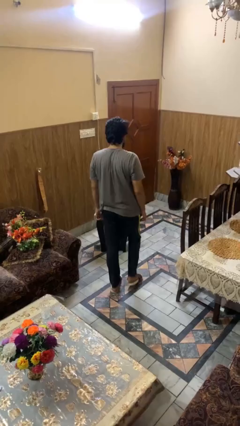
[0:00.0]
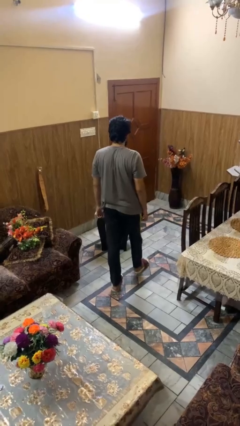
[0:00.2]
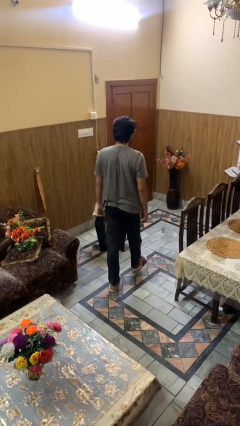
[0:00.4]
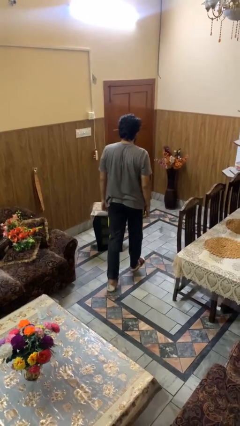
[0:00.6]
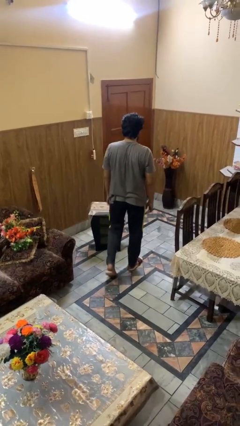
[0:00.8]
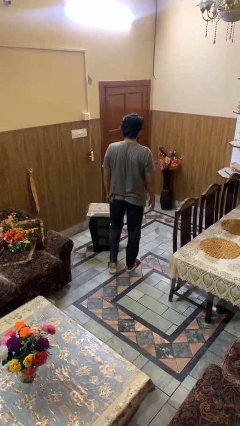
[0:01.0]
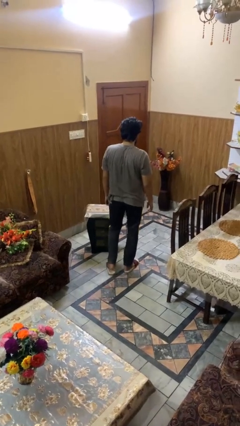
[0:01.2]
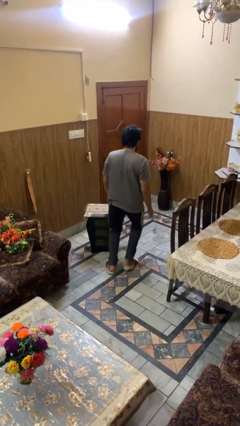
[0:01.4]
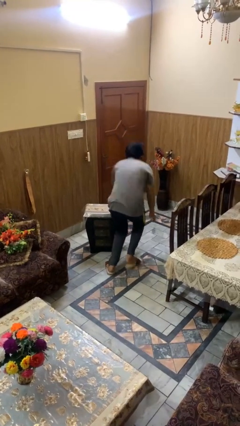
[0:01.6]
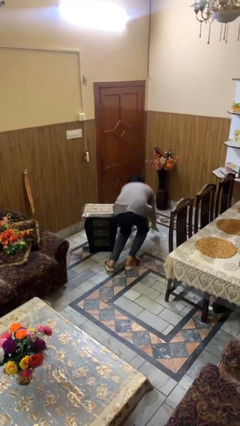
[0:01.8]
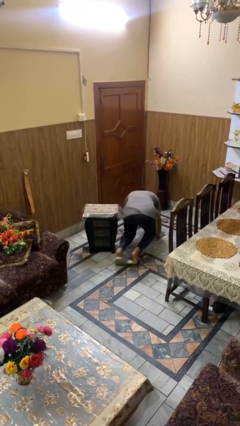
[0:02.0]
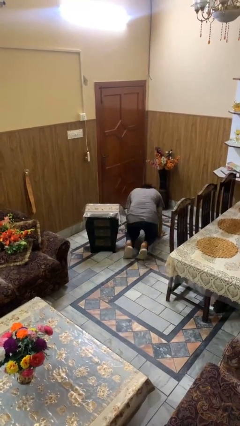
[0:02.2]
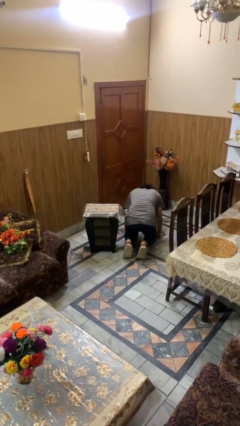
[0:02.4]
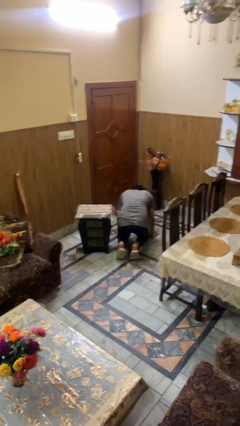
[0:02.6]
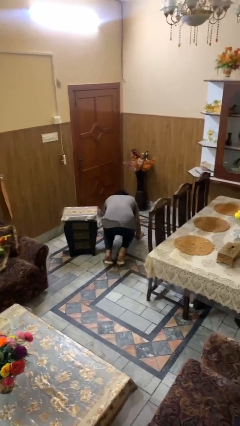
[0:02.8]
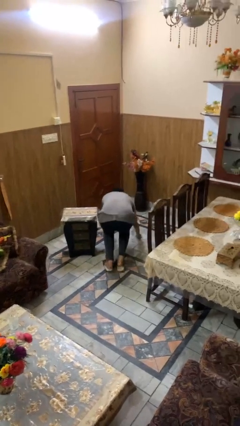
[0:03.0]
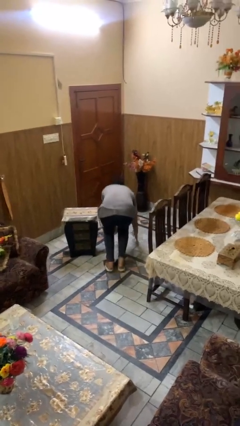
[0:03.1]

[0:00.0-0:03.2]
person trips on object on floor

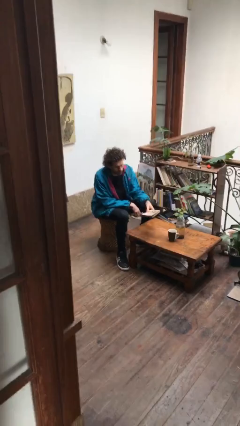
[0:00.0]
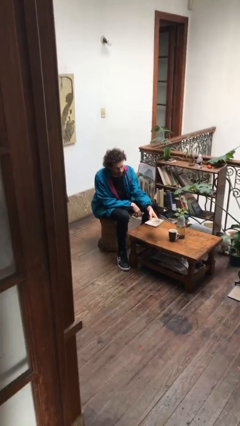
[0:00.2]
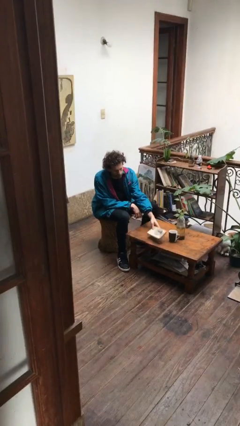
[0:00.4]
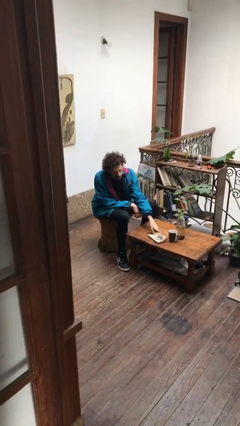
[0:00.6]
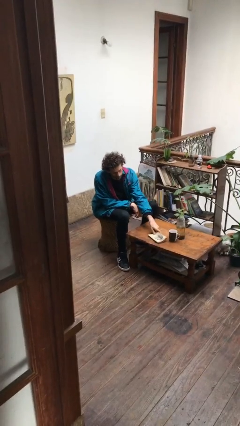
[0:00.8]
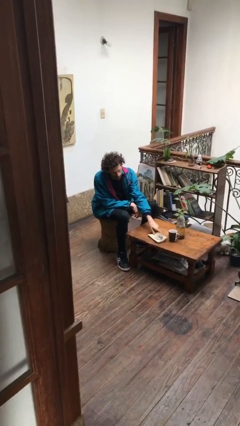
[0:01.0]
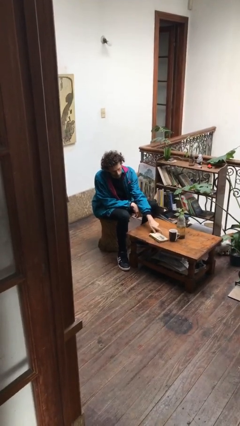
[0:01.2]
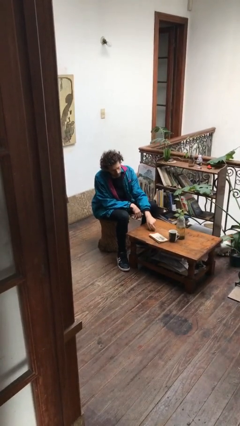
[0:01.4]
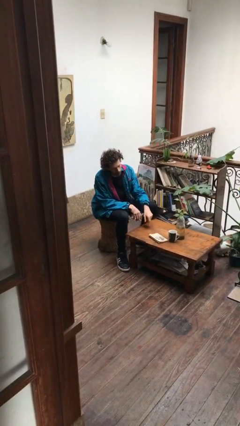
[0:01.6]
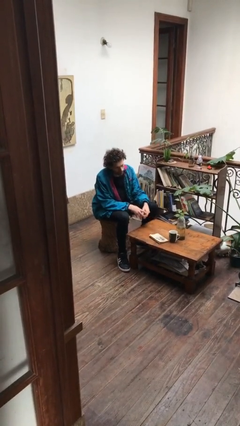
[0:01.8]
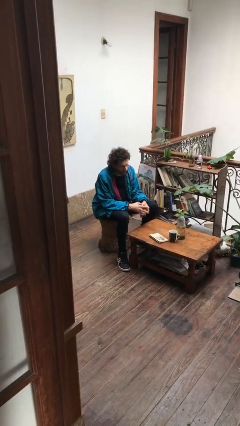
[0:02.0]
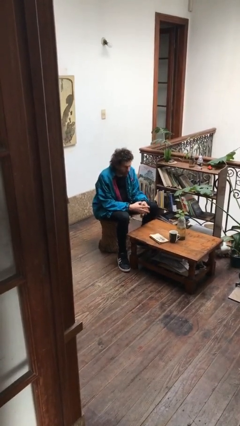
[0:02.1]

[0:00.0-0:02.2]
person puts down object on table

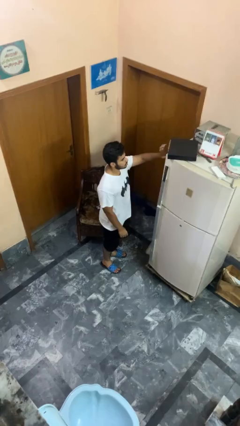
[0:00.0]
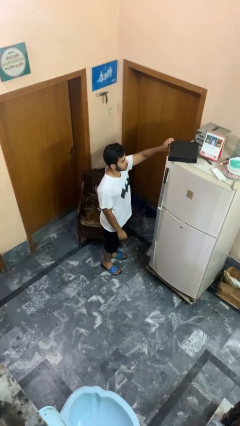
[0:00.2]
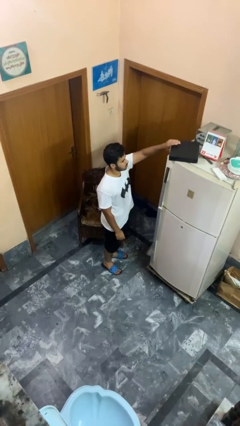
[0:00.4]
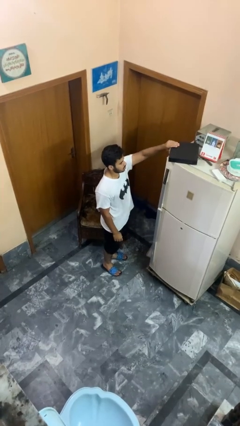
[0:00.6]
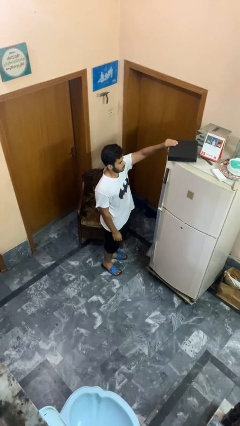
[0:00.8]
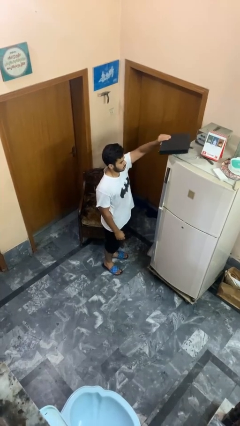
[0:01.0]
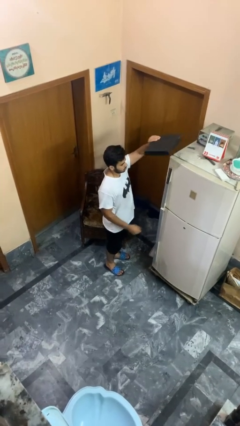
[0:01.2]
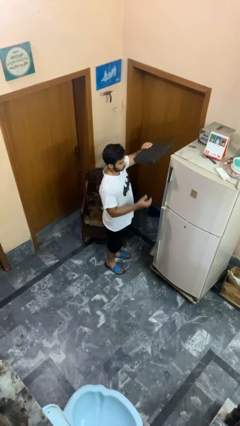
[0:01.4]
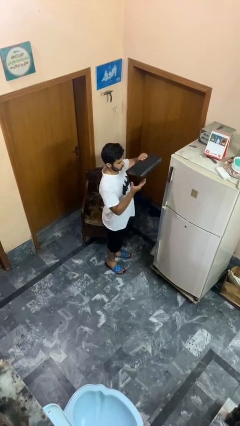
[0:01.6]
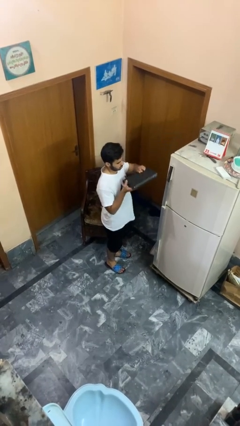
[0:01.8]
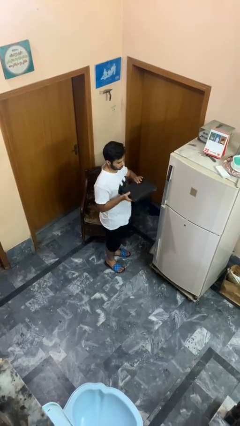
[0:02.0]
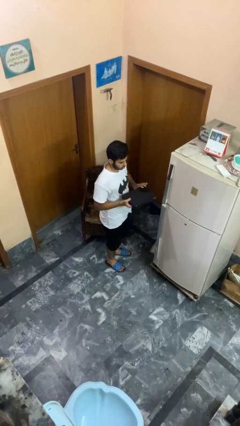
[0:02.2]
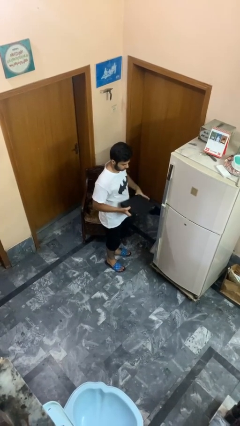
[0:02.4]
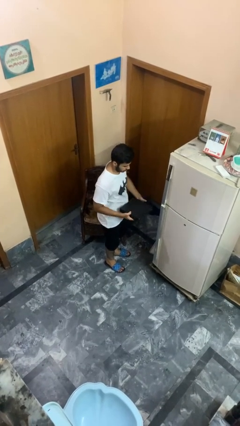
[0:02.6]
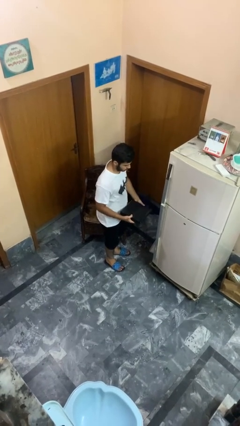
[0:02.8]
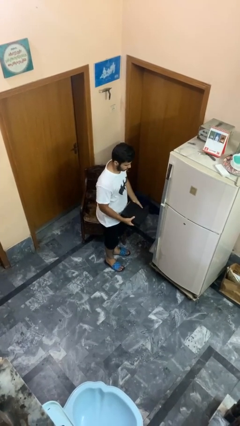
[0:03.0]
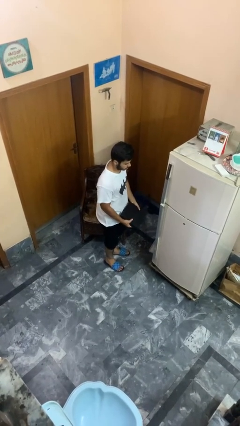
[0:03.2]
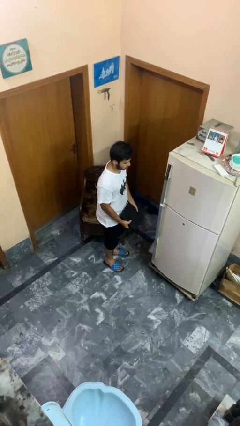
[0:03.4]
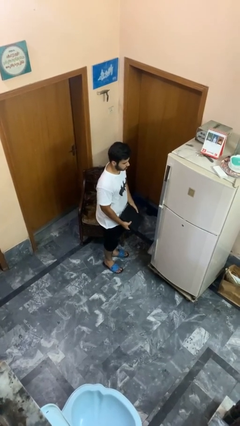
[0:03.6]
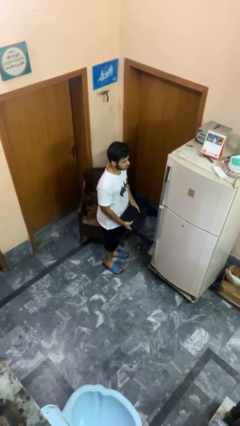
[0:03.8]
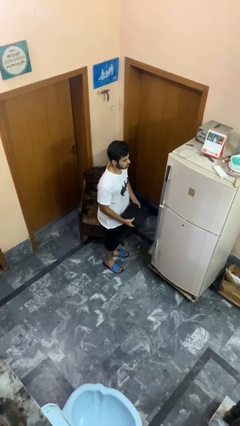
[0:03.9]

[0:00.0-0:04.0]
person picks up object from countertop

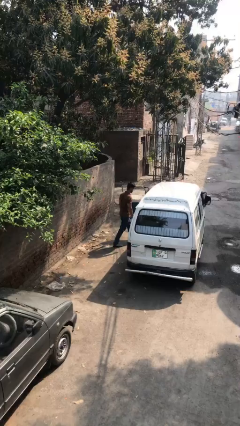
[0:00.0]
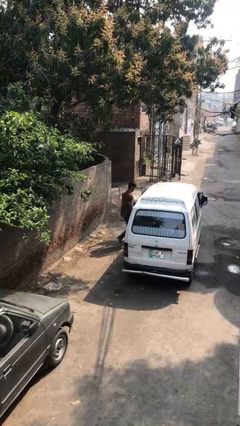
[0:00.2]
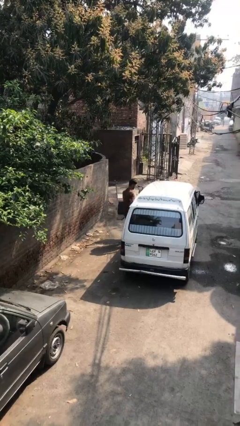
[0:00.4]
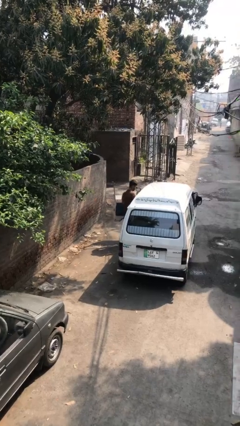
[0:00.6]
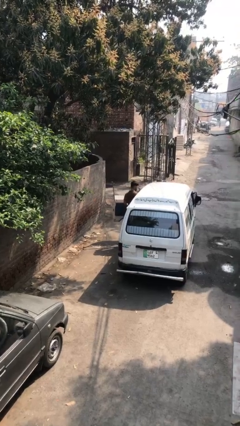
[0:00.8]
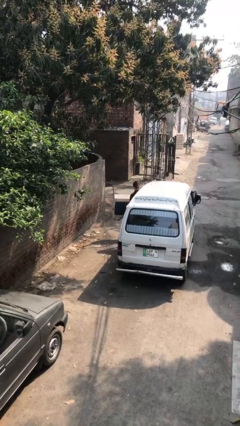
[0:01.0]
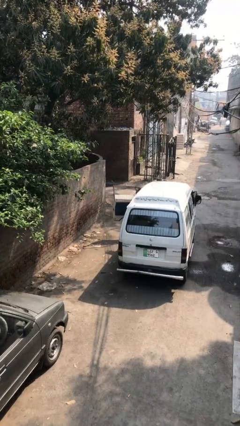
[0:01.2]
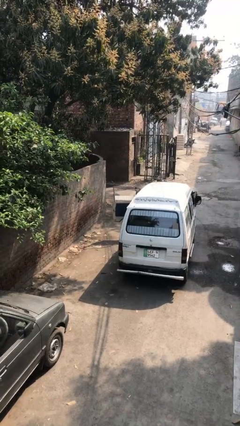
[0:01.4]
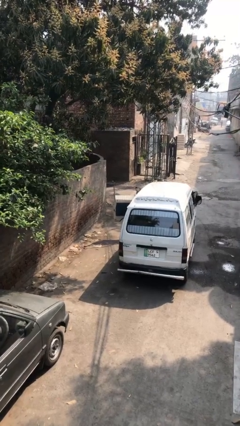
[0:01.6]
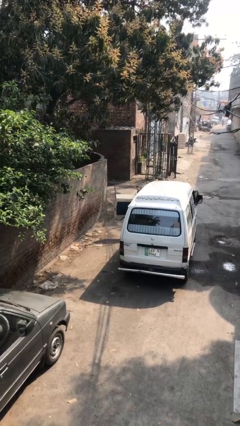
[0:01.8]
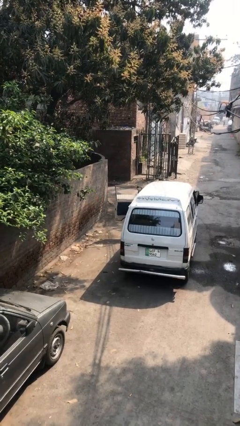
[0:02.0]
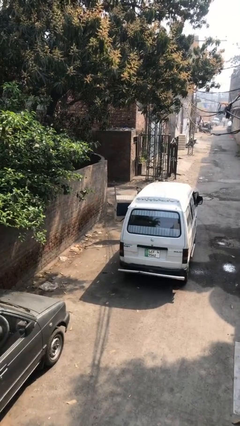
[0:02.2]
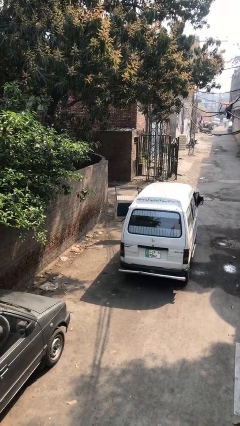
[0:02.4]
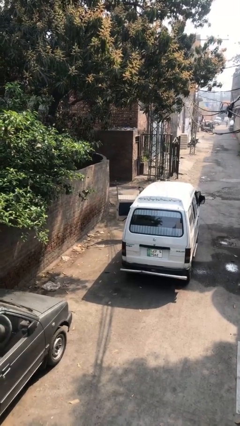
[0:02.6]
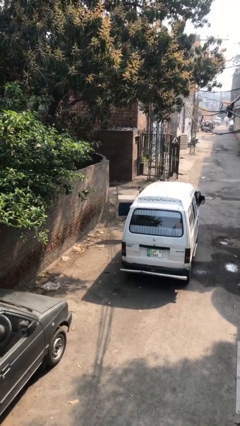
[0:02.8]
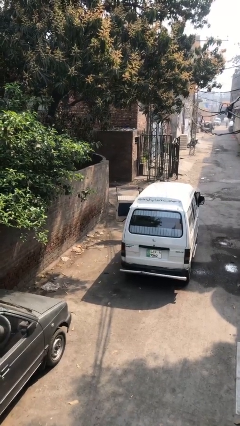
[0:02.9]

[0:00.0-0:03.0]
person enters car

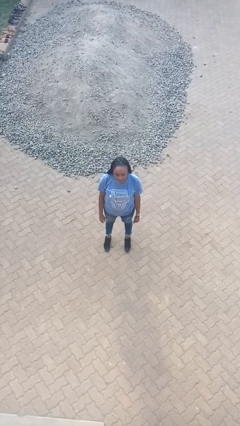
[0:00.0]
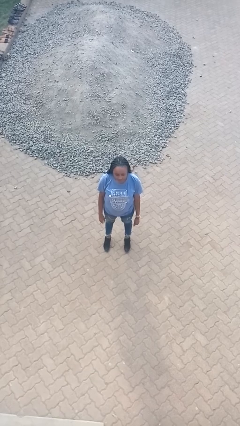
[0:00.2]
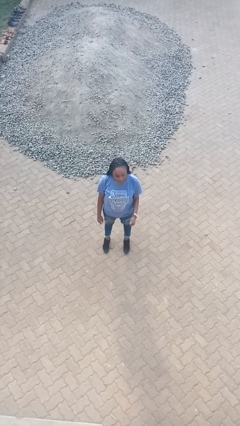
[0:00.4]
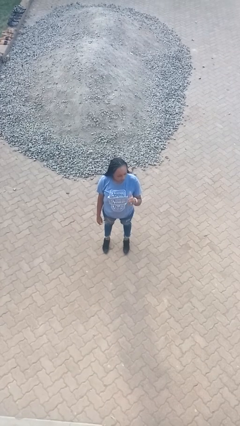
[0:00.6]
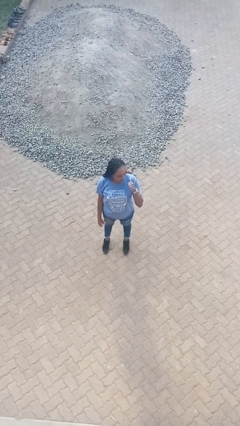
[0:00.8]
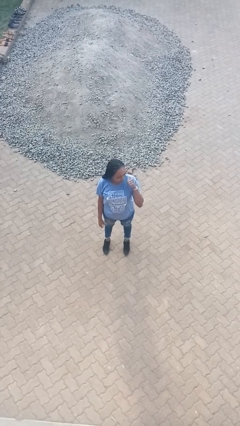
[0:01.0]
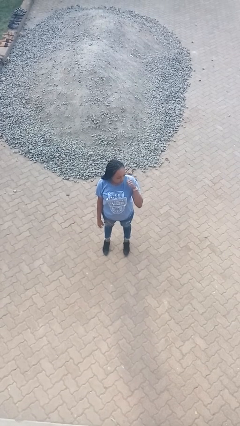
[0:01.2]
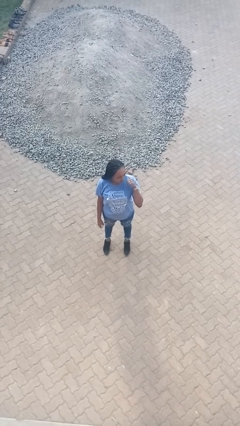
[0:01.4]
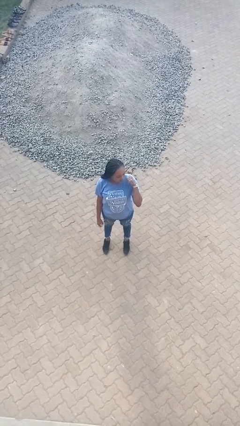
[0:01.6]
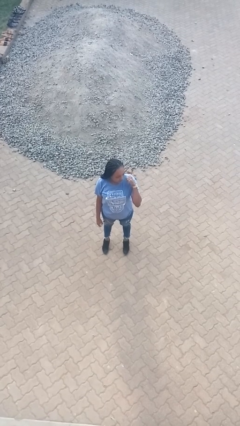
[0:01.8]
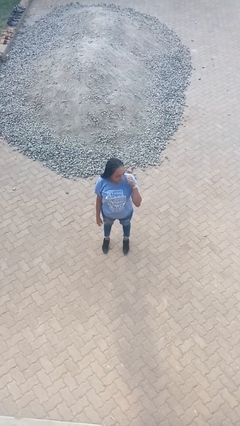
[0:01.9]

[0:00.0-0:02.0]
person gestures behind me

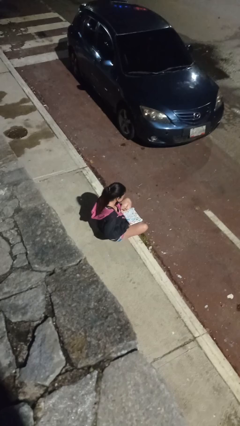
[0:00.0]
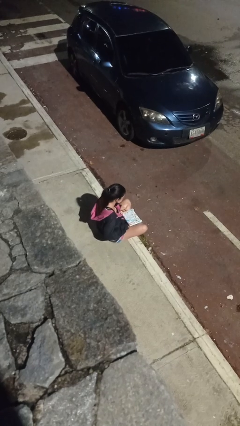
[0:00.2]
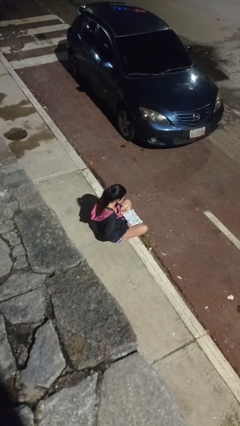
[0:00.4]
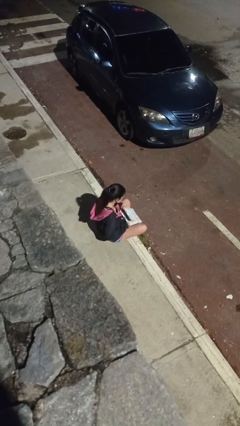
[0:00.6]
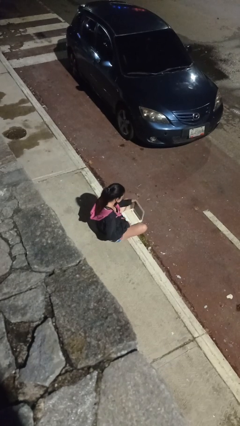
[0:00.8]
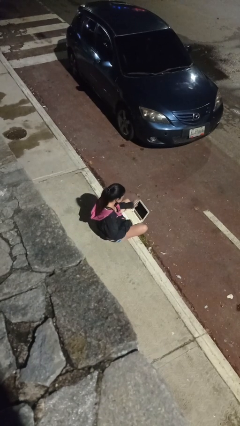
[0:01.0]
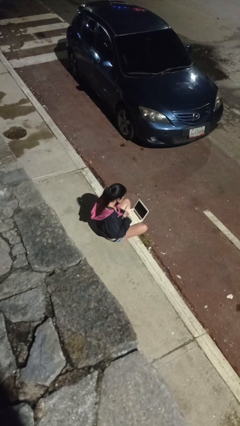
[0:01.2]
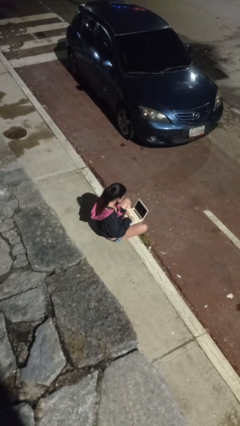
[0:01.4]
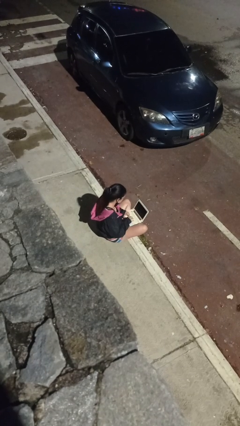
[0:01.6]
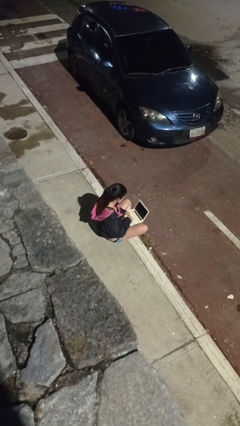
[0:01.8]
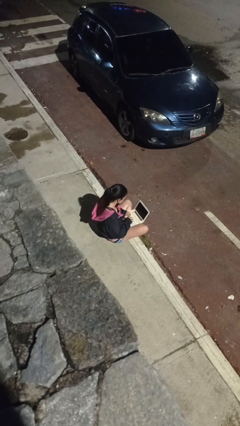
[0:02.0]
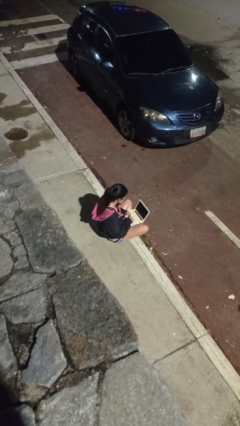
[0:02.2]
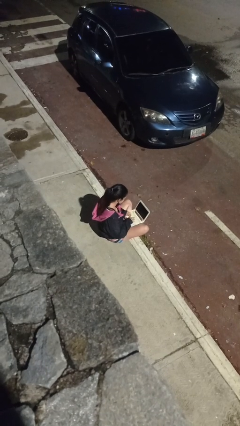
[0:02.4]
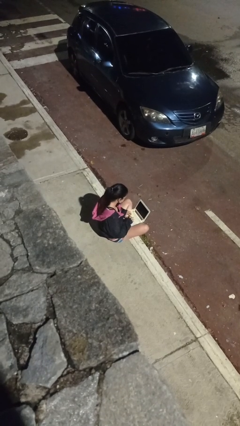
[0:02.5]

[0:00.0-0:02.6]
person opens laptop

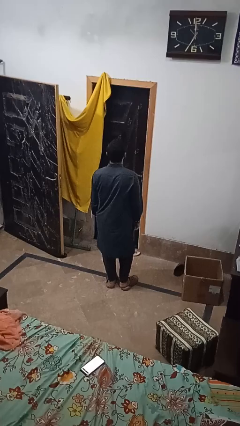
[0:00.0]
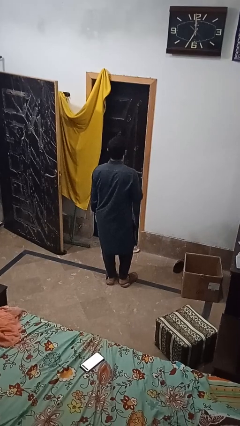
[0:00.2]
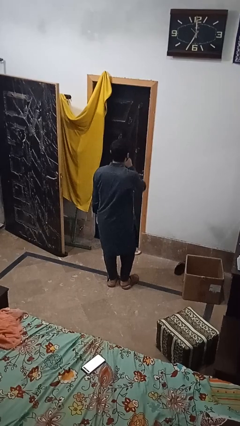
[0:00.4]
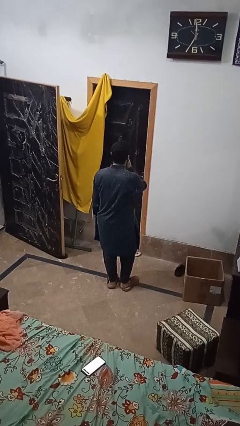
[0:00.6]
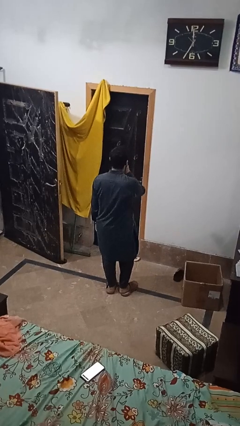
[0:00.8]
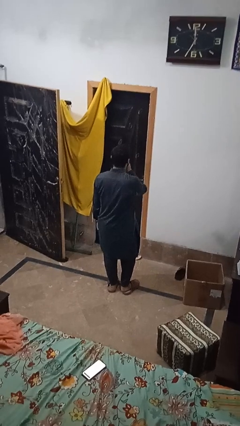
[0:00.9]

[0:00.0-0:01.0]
person gestures be quiet
